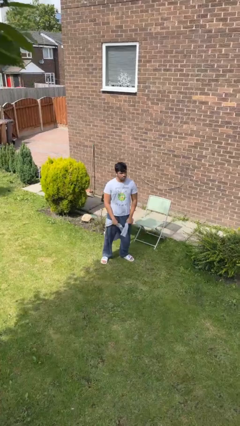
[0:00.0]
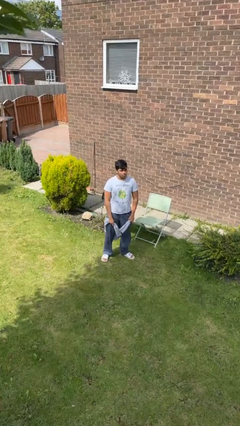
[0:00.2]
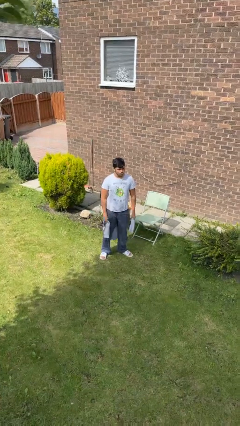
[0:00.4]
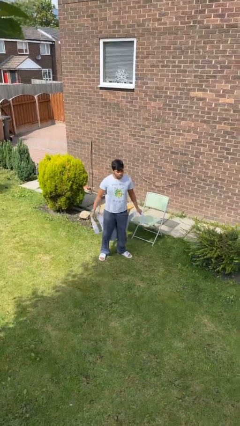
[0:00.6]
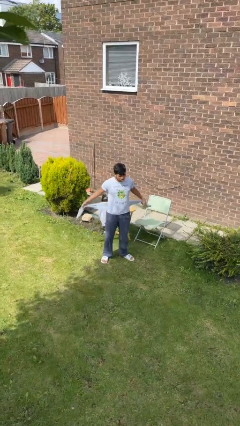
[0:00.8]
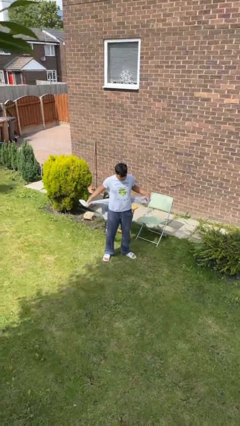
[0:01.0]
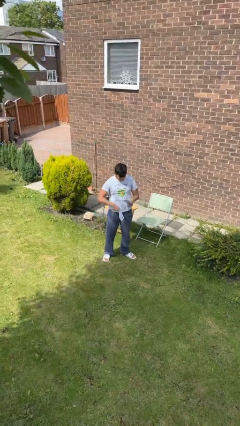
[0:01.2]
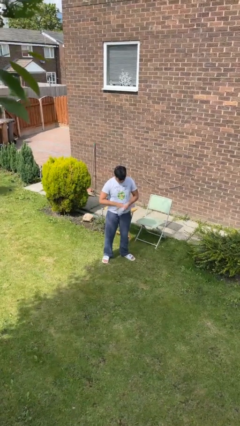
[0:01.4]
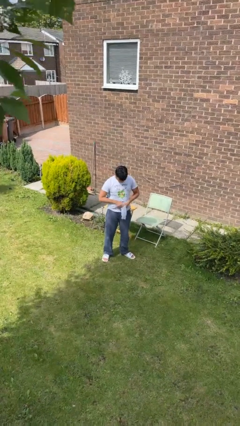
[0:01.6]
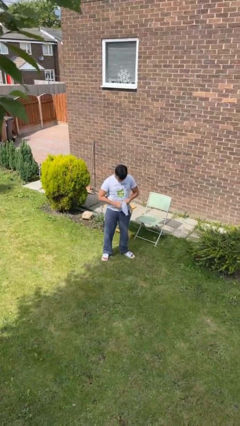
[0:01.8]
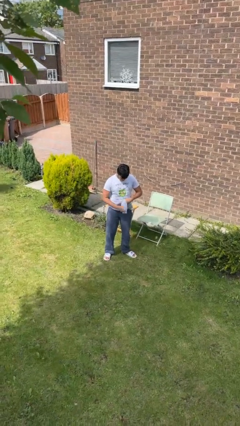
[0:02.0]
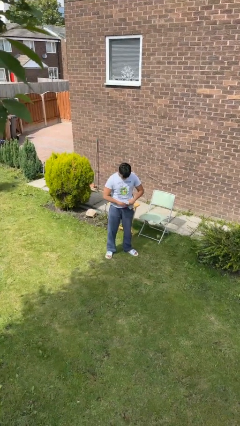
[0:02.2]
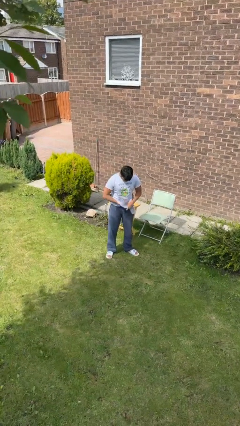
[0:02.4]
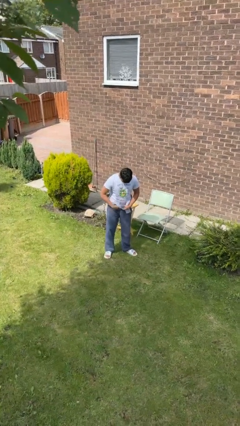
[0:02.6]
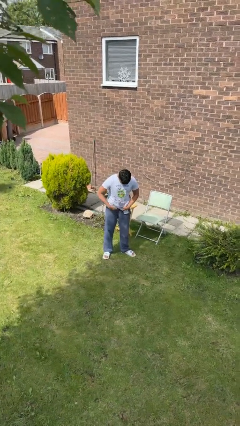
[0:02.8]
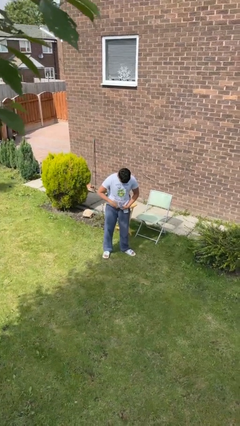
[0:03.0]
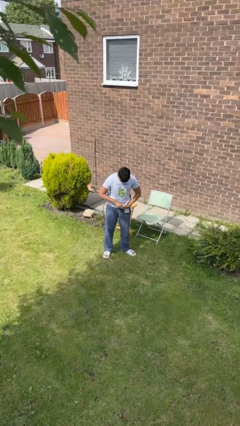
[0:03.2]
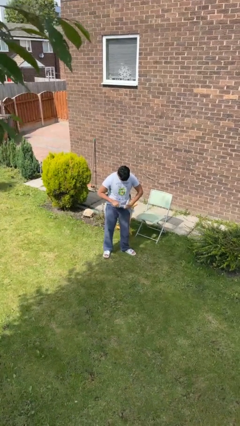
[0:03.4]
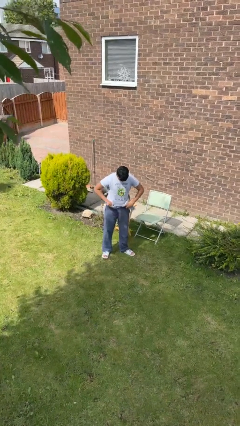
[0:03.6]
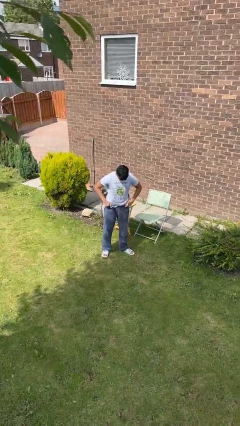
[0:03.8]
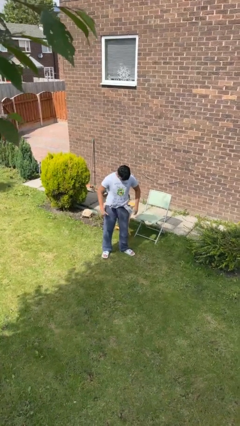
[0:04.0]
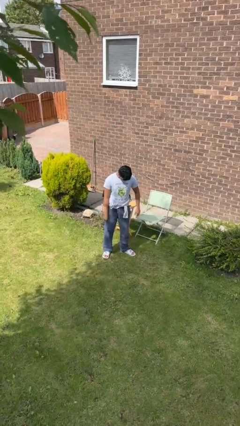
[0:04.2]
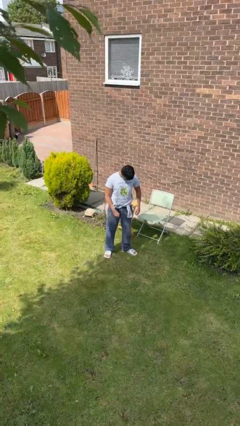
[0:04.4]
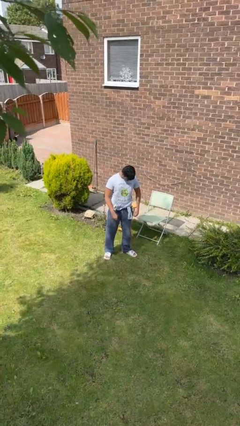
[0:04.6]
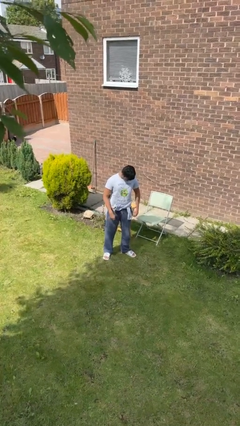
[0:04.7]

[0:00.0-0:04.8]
person ties jacket around waist

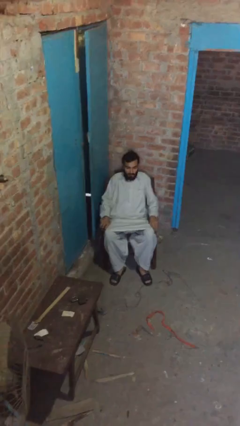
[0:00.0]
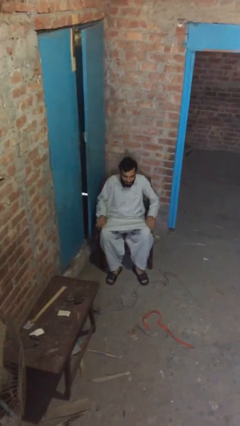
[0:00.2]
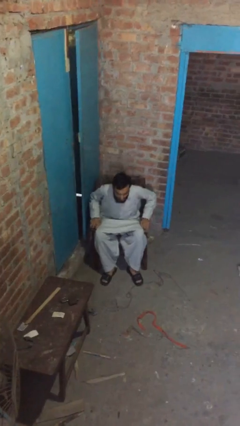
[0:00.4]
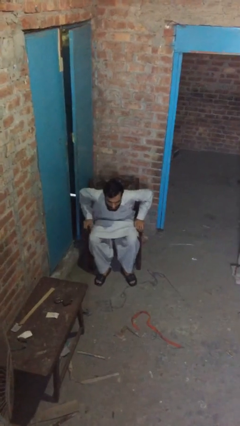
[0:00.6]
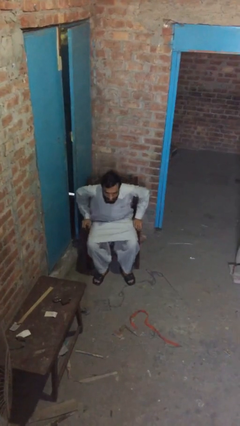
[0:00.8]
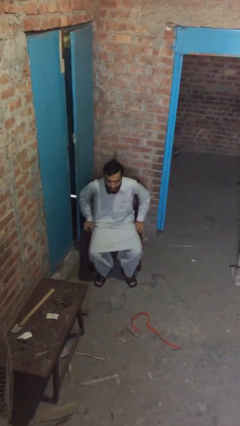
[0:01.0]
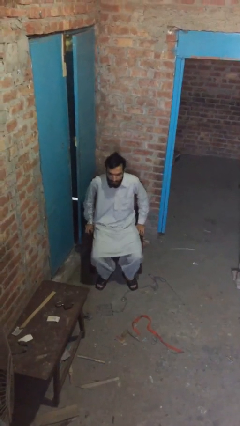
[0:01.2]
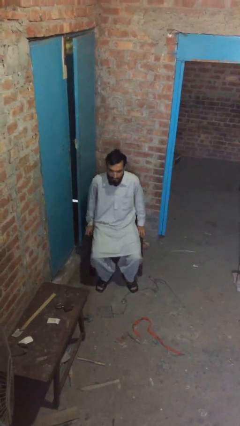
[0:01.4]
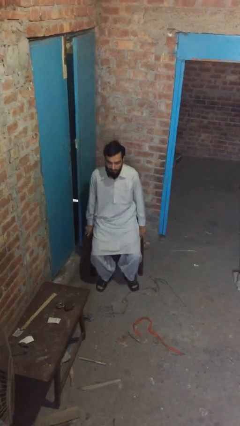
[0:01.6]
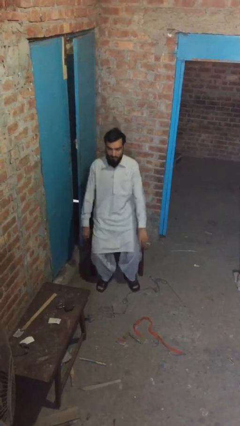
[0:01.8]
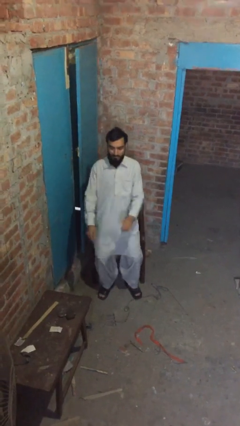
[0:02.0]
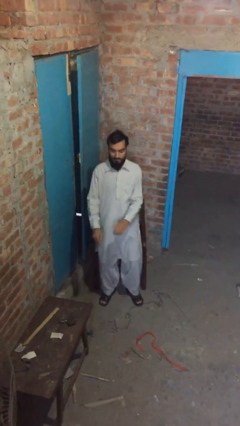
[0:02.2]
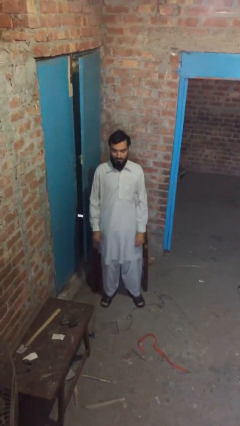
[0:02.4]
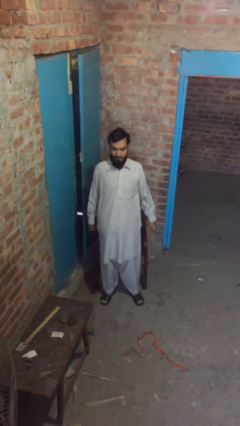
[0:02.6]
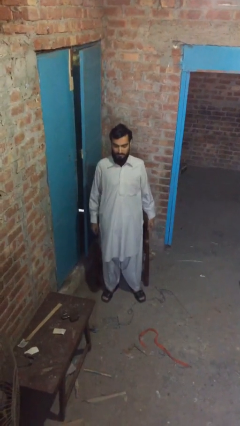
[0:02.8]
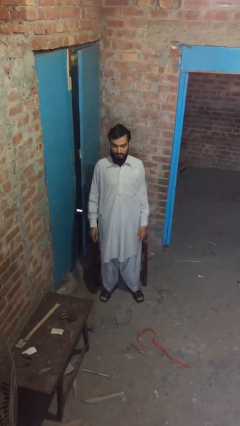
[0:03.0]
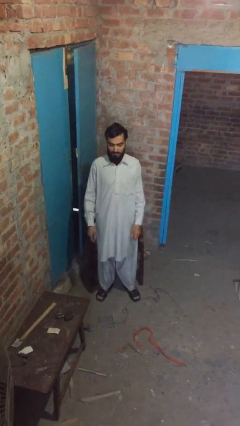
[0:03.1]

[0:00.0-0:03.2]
person stands up

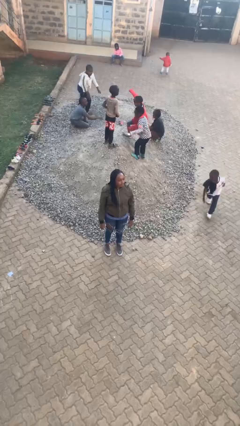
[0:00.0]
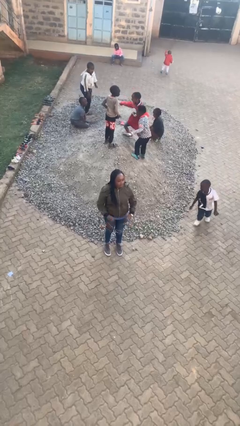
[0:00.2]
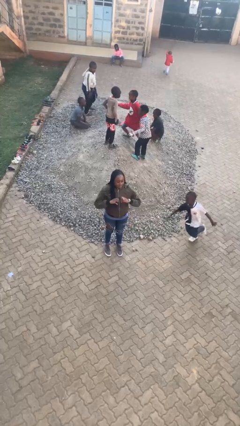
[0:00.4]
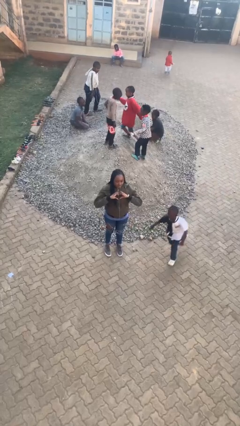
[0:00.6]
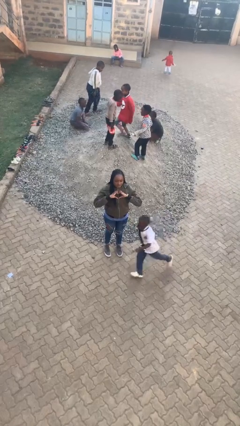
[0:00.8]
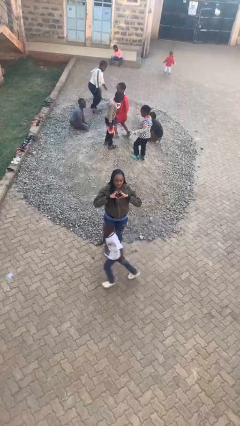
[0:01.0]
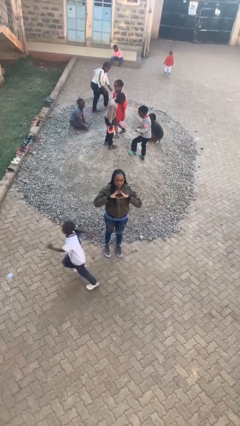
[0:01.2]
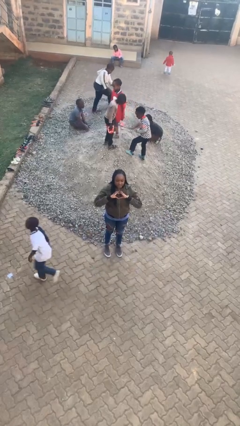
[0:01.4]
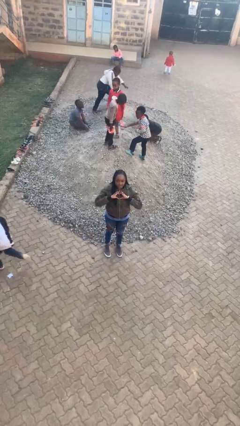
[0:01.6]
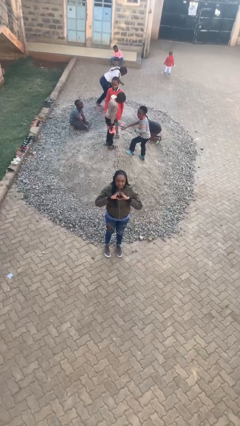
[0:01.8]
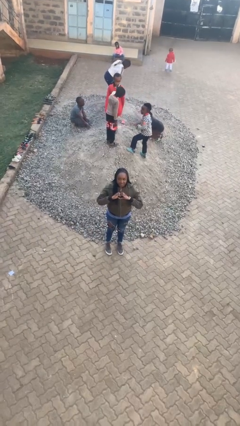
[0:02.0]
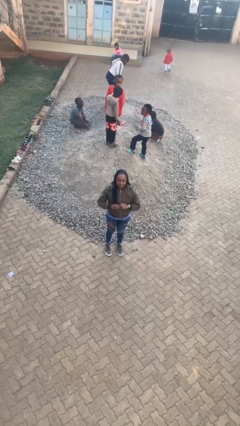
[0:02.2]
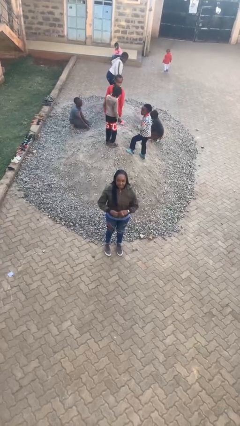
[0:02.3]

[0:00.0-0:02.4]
person gestures heart

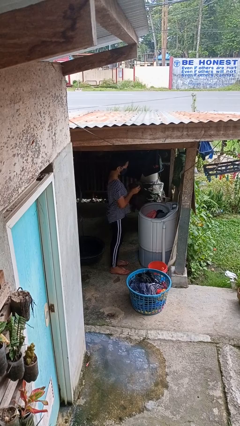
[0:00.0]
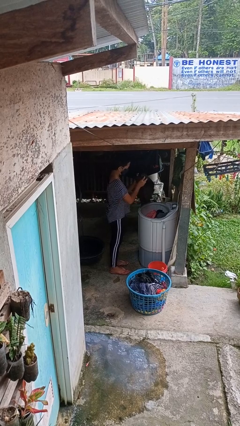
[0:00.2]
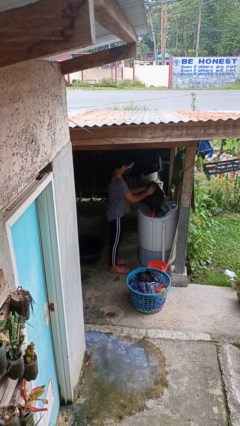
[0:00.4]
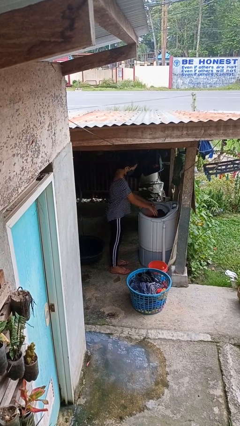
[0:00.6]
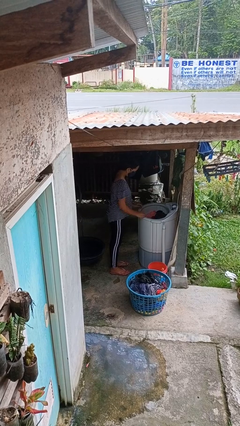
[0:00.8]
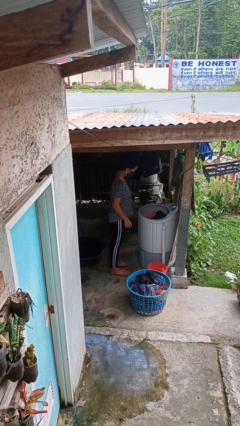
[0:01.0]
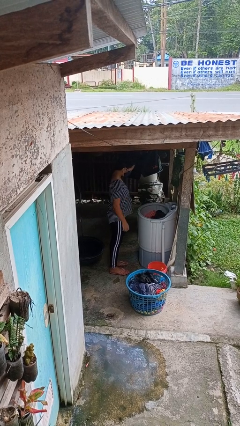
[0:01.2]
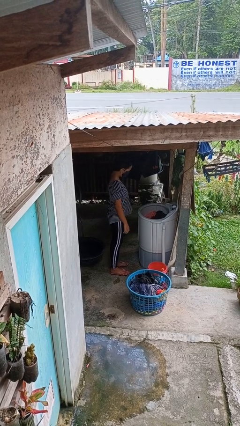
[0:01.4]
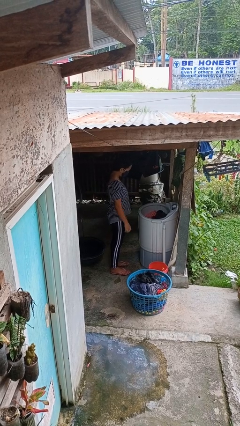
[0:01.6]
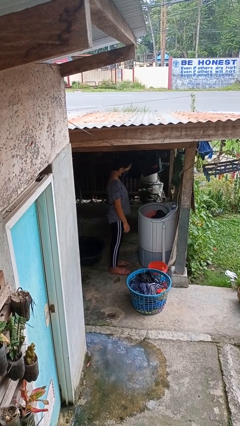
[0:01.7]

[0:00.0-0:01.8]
person loads clotheswasher

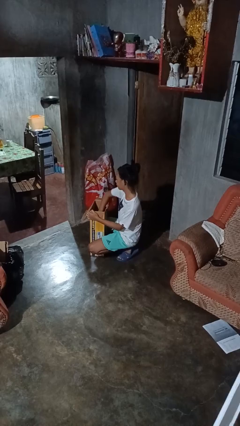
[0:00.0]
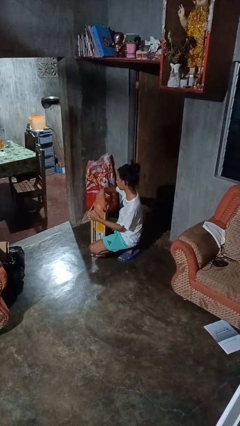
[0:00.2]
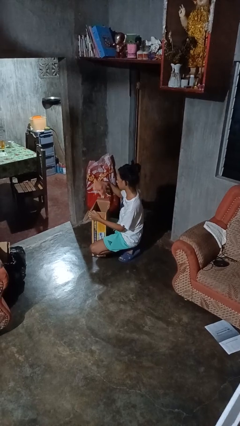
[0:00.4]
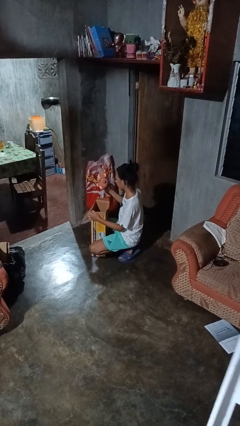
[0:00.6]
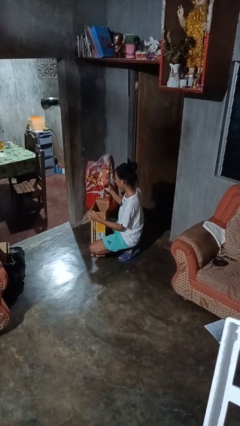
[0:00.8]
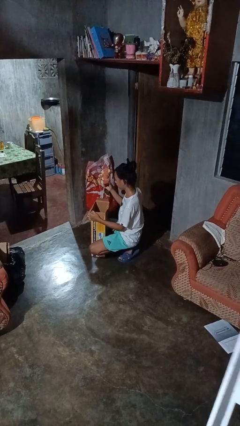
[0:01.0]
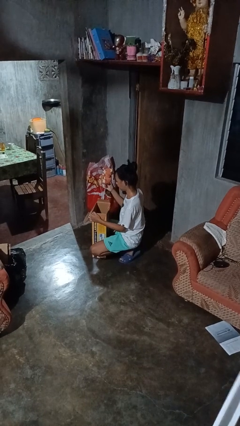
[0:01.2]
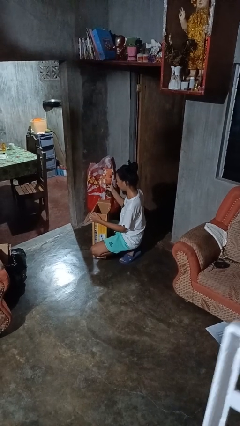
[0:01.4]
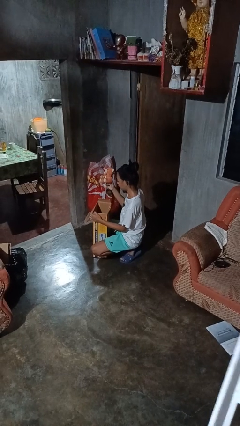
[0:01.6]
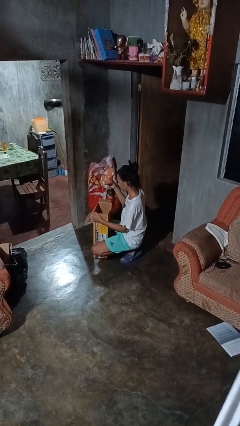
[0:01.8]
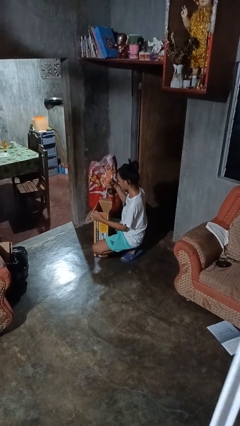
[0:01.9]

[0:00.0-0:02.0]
person takes object from box

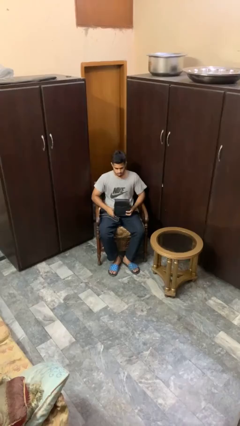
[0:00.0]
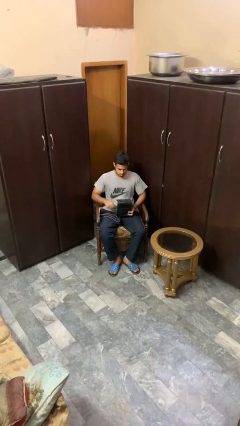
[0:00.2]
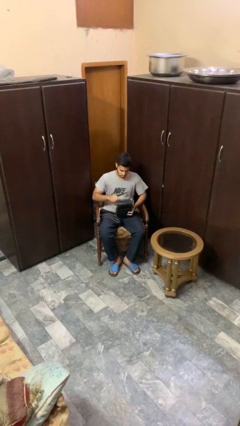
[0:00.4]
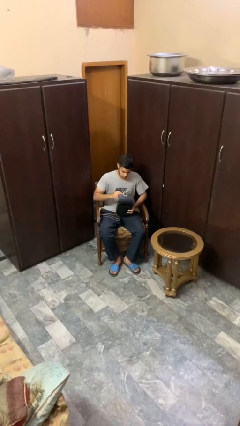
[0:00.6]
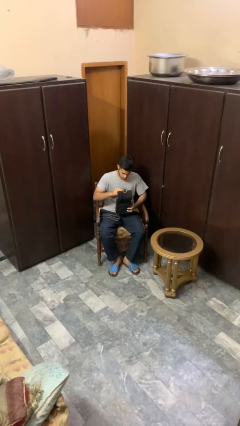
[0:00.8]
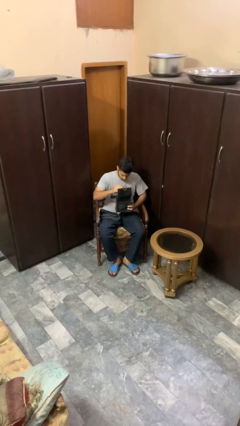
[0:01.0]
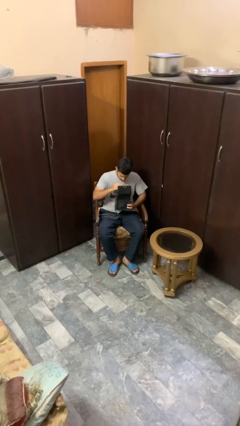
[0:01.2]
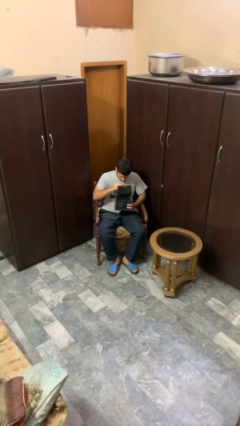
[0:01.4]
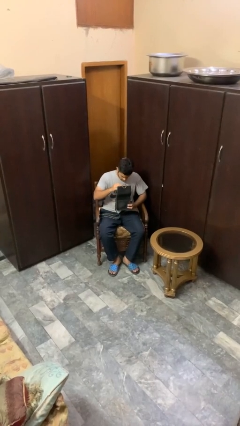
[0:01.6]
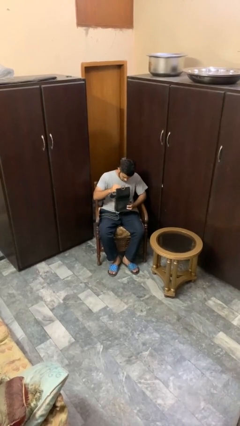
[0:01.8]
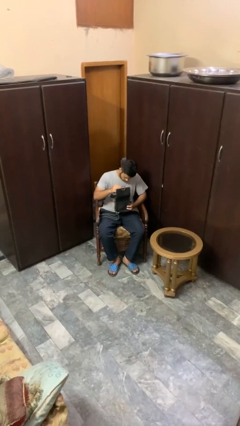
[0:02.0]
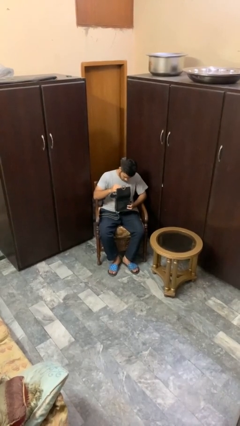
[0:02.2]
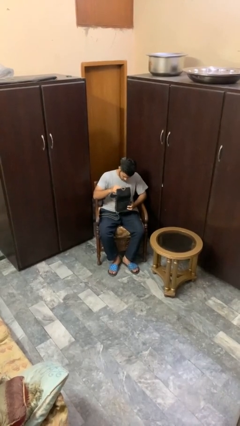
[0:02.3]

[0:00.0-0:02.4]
person searches in purse

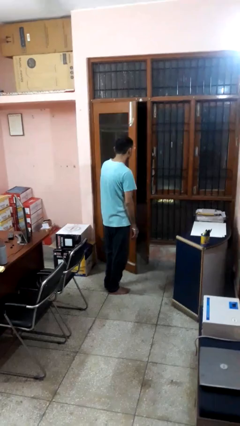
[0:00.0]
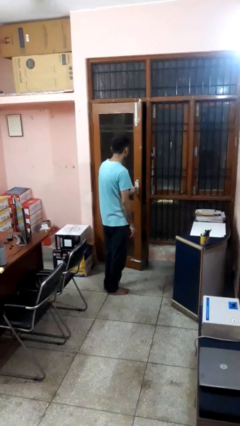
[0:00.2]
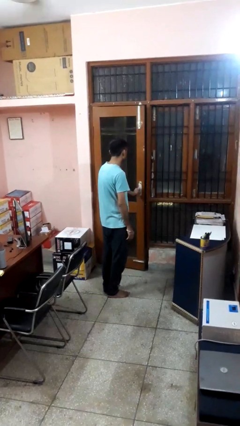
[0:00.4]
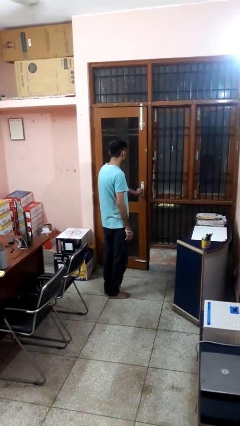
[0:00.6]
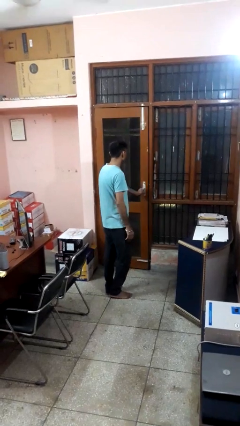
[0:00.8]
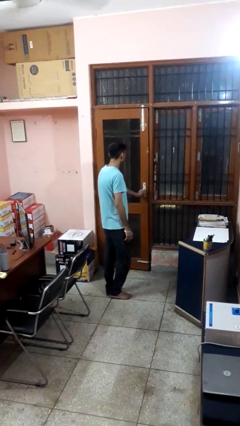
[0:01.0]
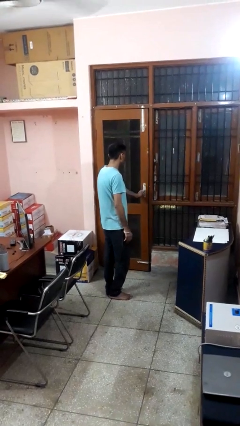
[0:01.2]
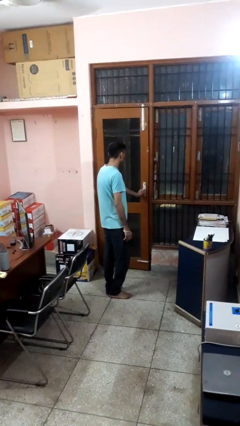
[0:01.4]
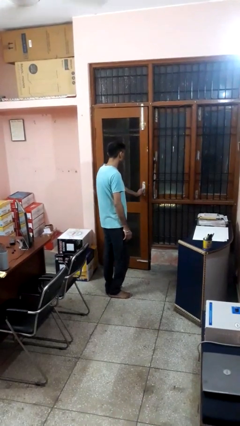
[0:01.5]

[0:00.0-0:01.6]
person closes facility door
